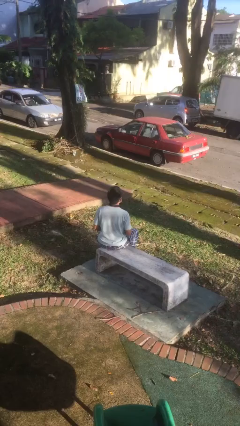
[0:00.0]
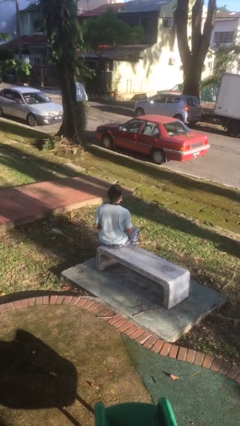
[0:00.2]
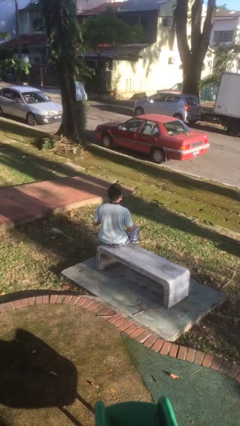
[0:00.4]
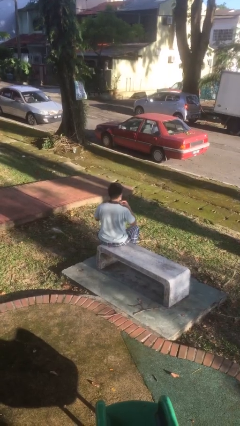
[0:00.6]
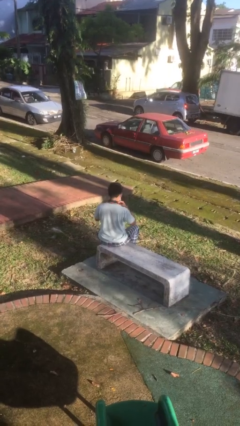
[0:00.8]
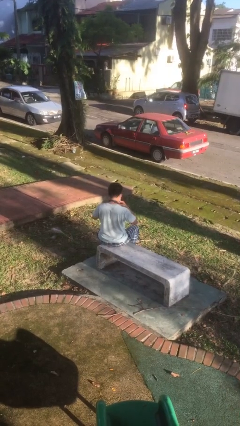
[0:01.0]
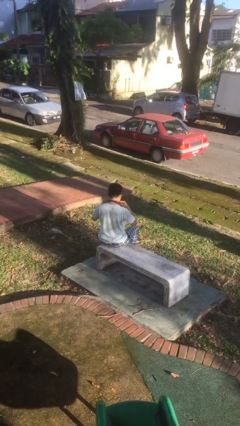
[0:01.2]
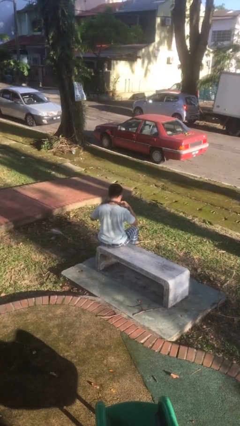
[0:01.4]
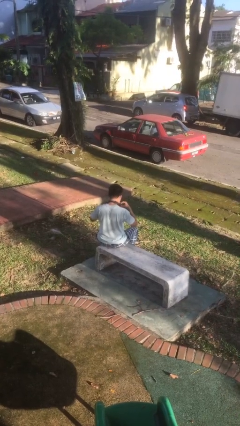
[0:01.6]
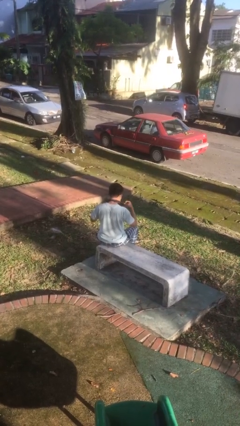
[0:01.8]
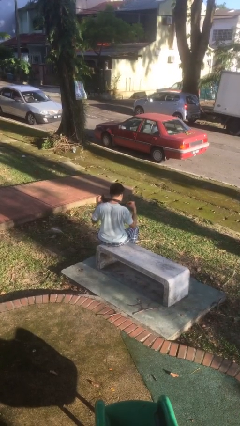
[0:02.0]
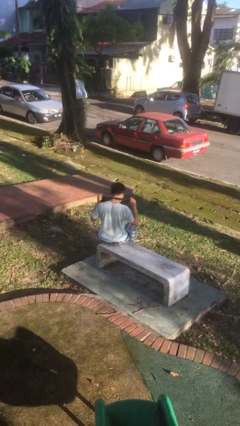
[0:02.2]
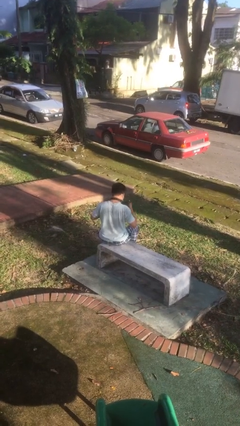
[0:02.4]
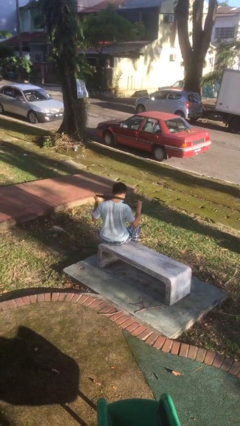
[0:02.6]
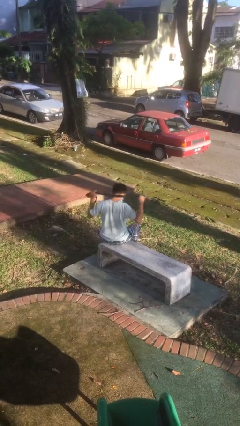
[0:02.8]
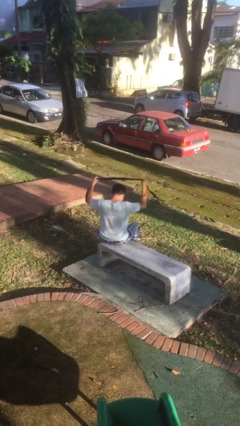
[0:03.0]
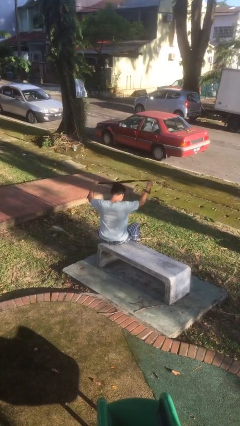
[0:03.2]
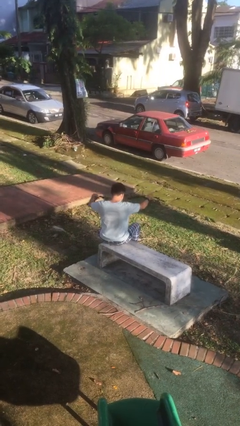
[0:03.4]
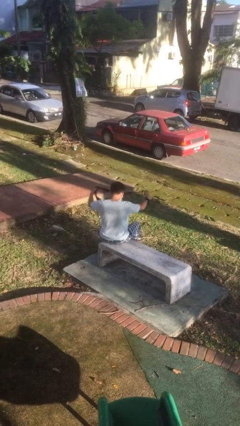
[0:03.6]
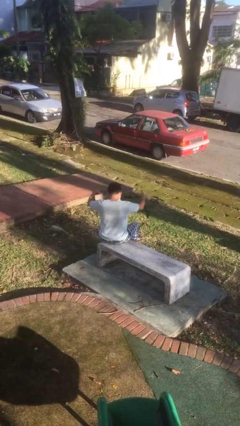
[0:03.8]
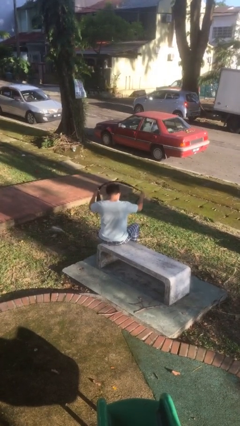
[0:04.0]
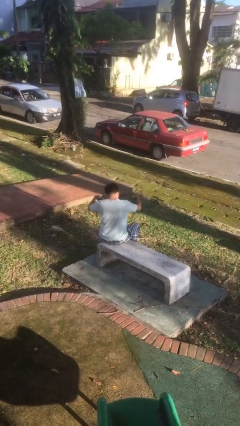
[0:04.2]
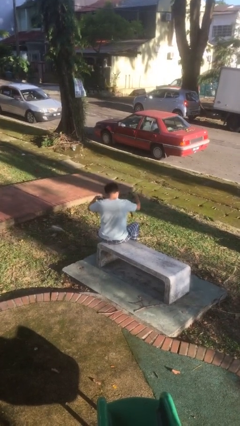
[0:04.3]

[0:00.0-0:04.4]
person takes off necktie

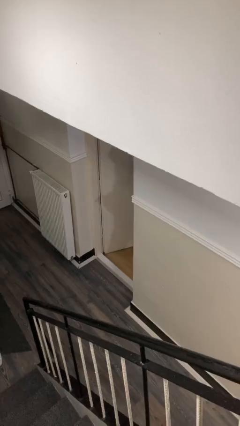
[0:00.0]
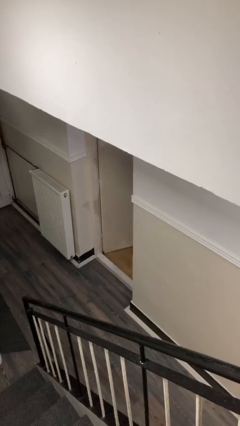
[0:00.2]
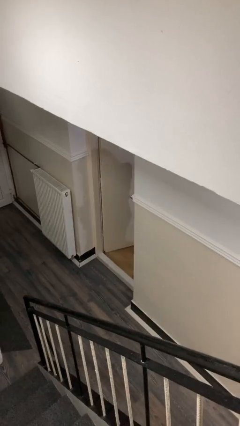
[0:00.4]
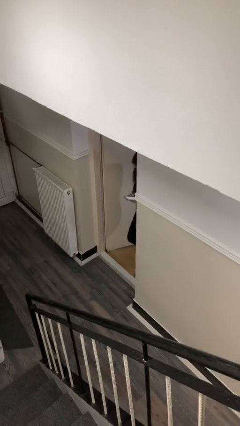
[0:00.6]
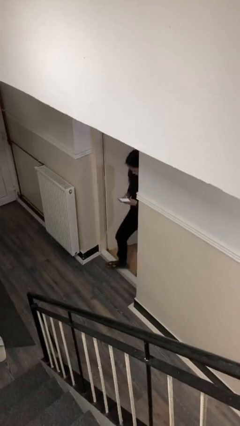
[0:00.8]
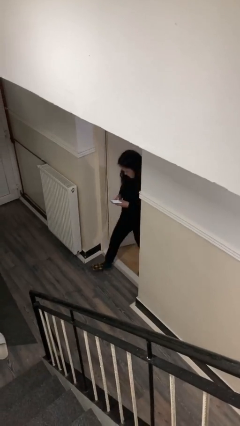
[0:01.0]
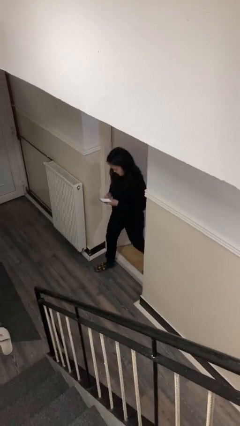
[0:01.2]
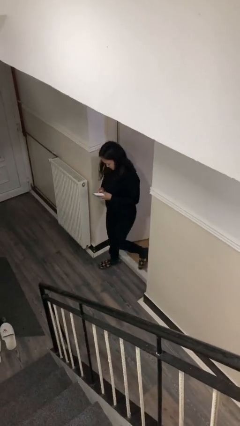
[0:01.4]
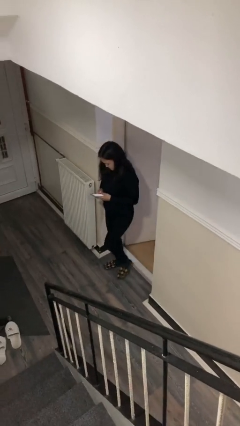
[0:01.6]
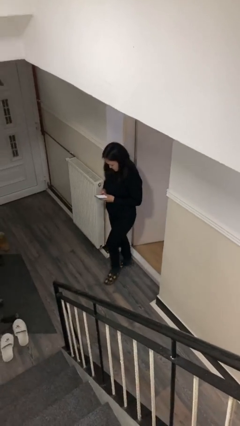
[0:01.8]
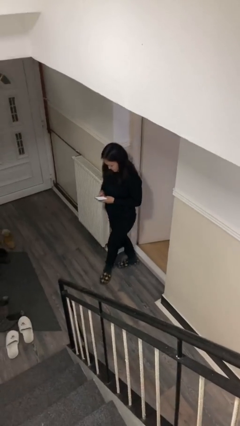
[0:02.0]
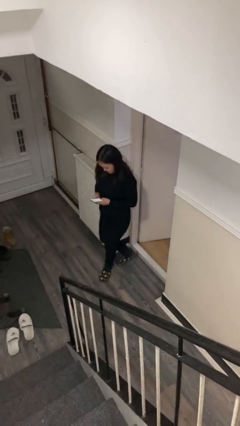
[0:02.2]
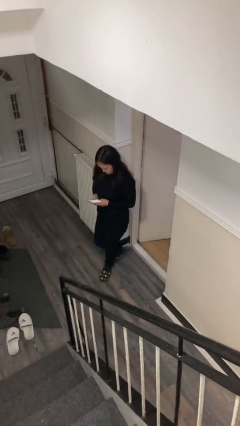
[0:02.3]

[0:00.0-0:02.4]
person enters scene through structure

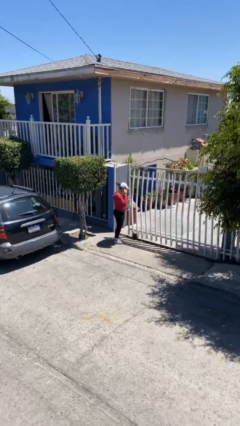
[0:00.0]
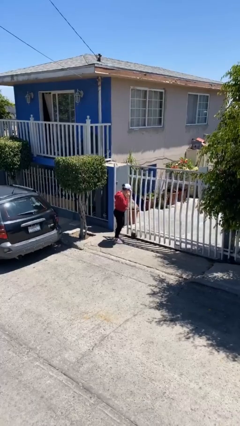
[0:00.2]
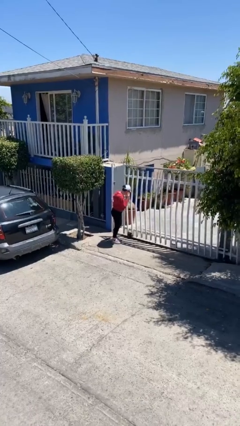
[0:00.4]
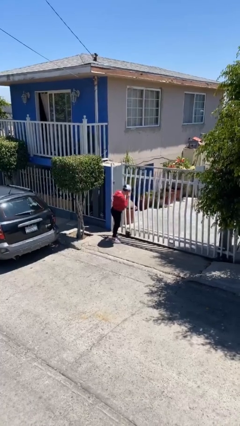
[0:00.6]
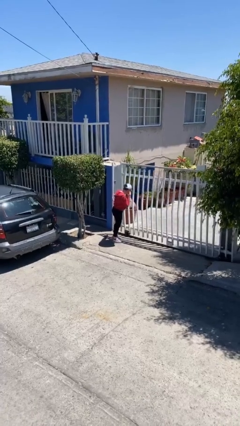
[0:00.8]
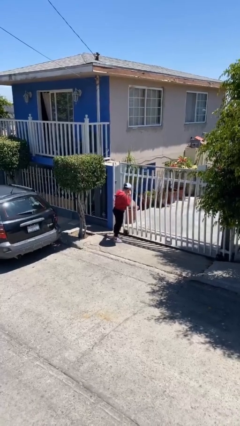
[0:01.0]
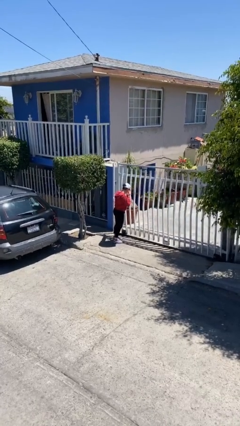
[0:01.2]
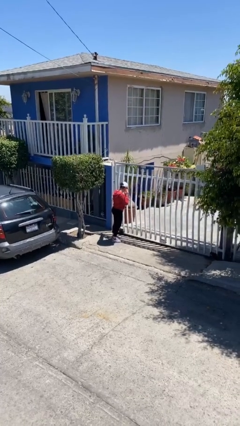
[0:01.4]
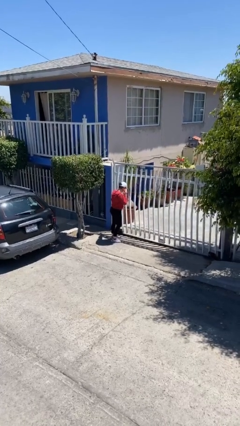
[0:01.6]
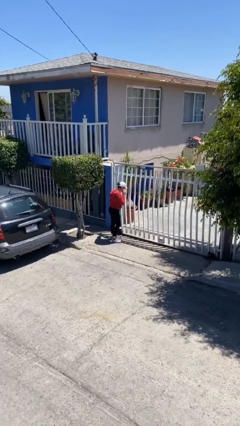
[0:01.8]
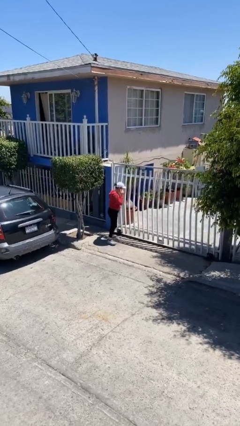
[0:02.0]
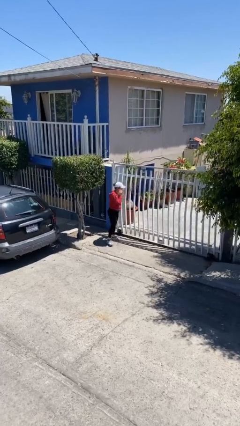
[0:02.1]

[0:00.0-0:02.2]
person closes facility door

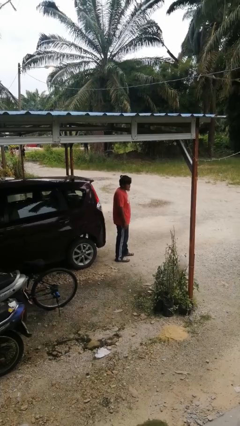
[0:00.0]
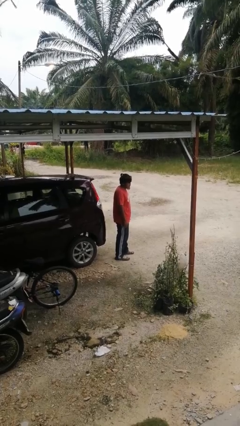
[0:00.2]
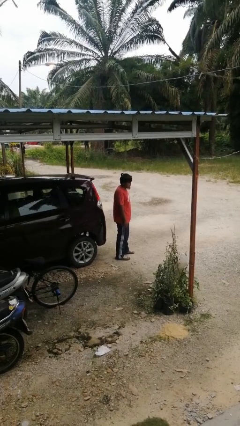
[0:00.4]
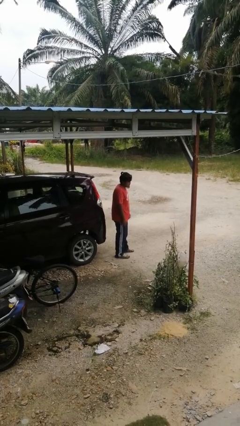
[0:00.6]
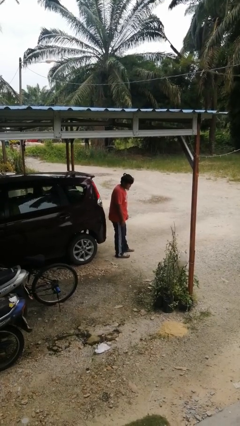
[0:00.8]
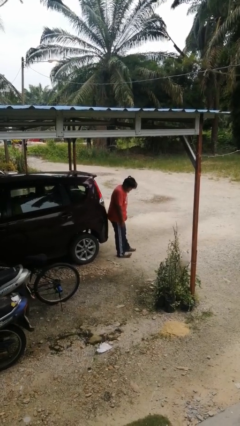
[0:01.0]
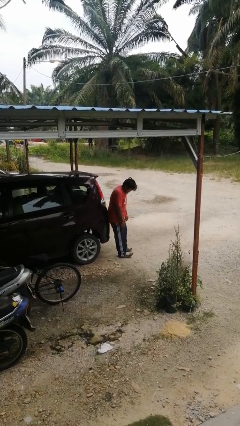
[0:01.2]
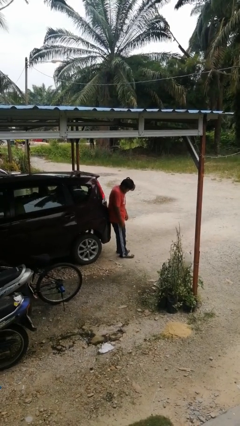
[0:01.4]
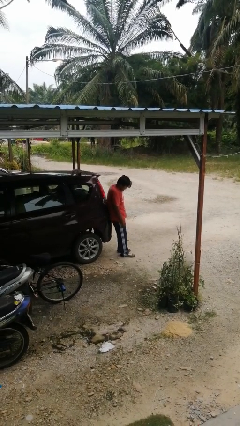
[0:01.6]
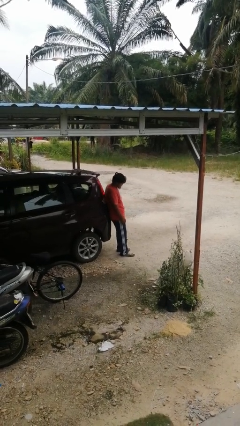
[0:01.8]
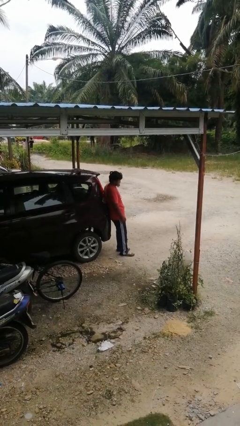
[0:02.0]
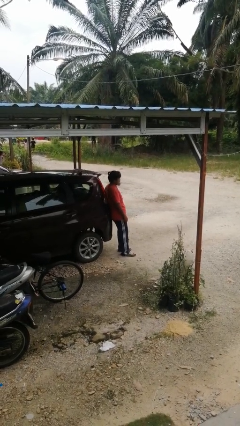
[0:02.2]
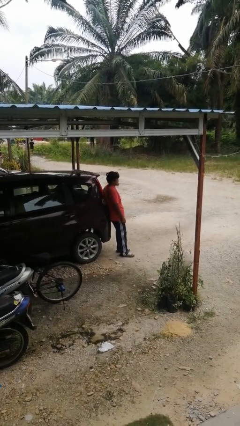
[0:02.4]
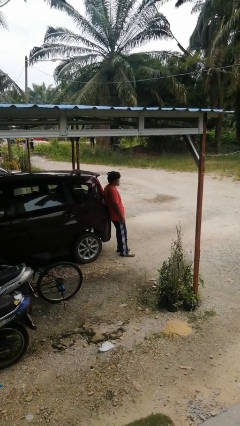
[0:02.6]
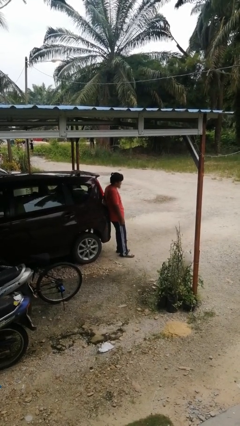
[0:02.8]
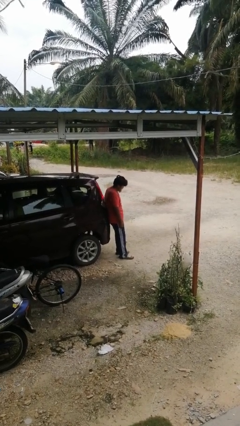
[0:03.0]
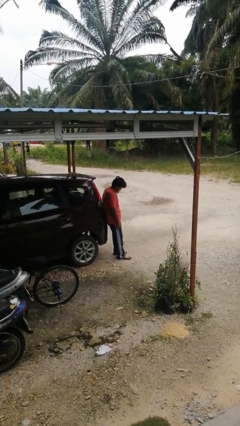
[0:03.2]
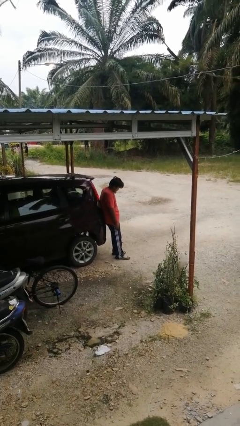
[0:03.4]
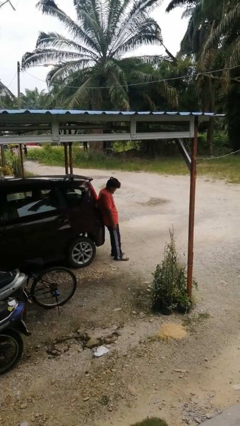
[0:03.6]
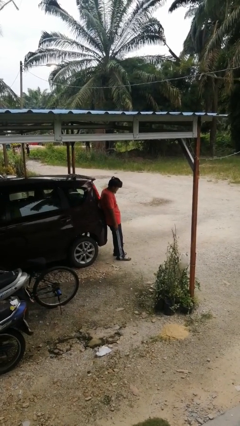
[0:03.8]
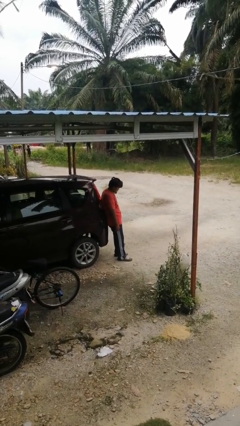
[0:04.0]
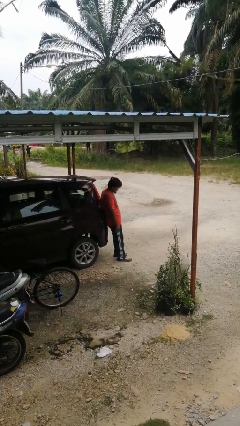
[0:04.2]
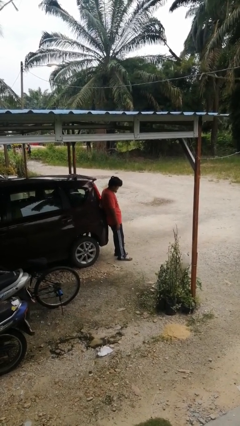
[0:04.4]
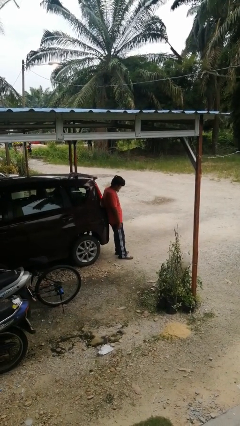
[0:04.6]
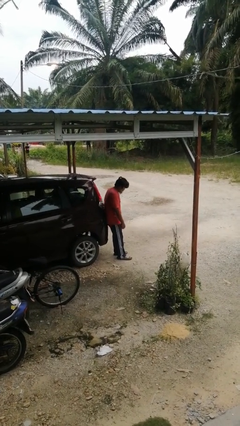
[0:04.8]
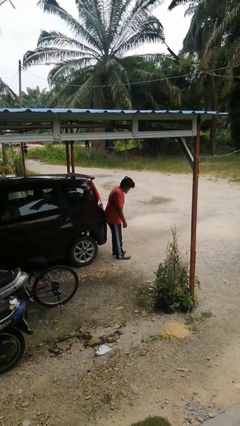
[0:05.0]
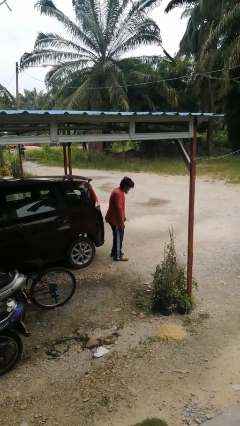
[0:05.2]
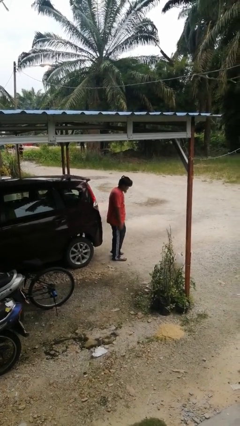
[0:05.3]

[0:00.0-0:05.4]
person leans against car

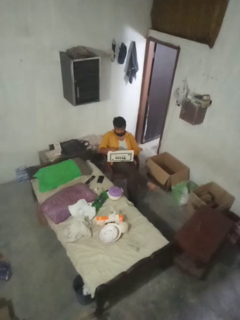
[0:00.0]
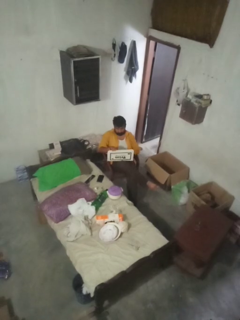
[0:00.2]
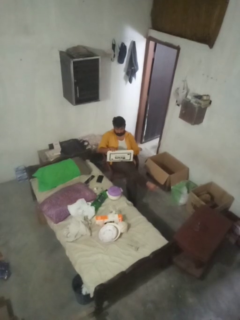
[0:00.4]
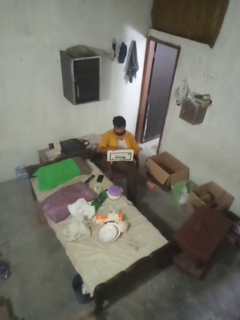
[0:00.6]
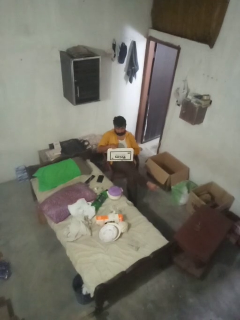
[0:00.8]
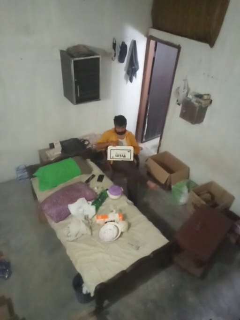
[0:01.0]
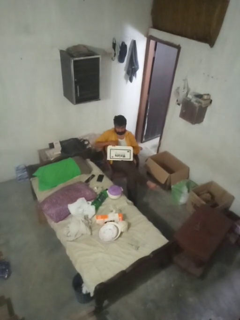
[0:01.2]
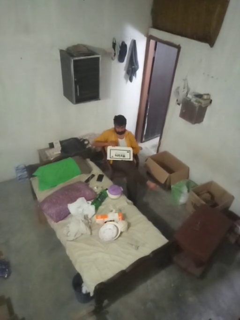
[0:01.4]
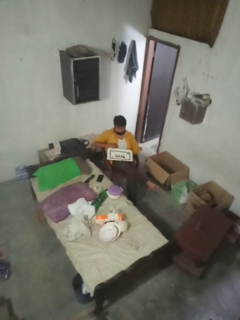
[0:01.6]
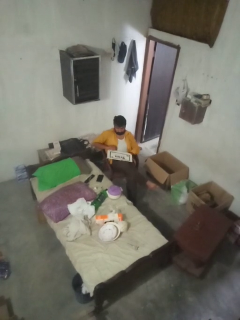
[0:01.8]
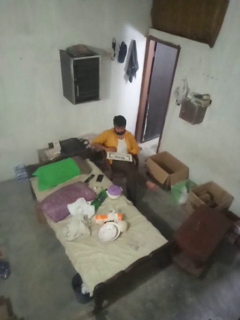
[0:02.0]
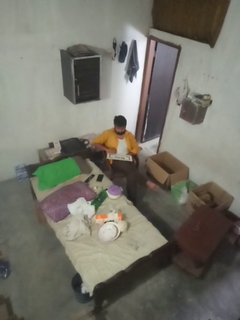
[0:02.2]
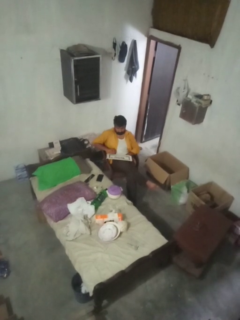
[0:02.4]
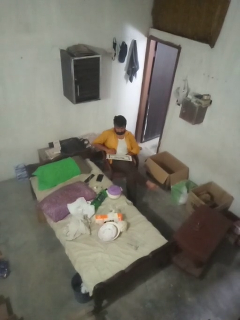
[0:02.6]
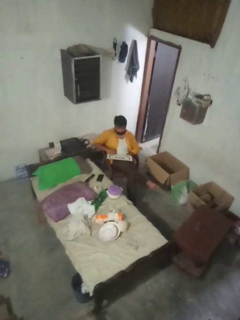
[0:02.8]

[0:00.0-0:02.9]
person closes laptop

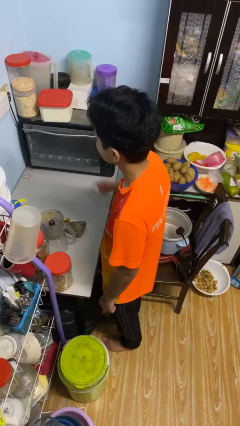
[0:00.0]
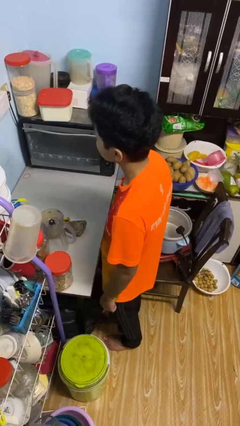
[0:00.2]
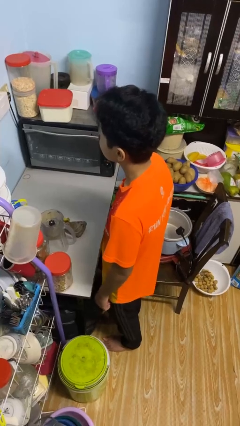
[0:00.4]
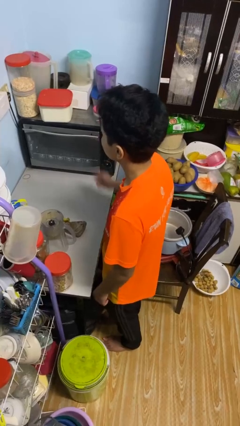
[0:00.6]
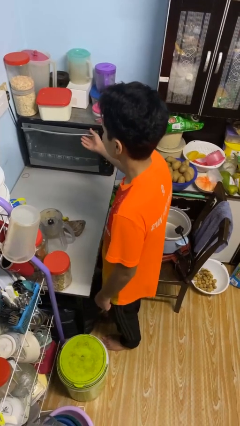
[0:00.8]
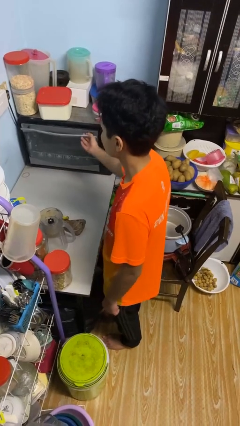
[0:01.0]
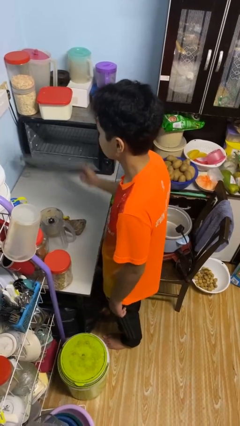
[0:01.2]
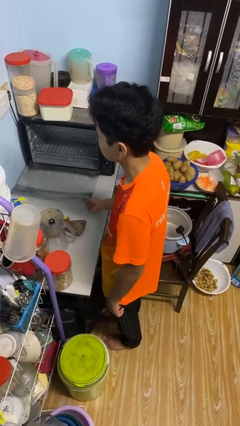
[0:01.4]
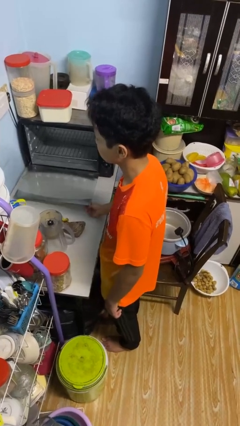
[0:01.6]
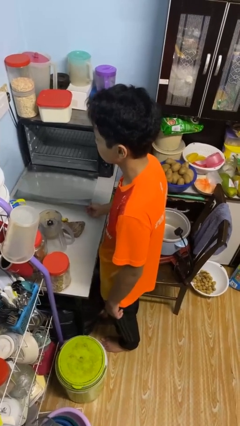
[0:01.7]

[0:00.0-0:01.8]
person opens oven door
